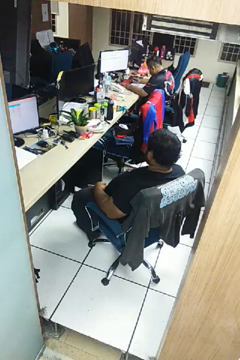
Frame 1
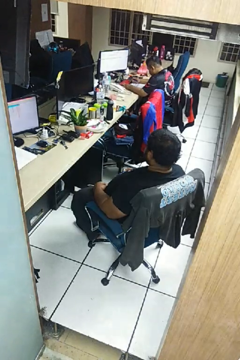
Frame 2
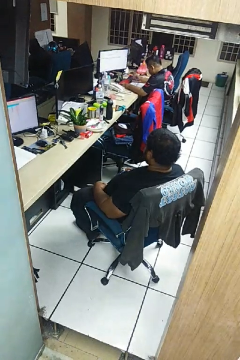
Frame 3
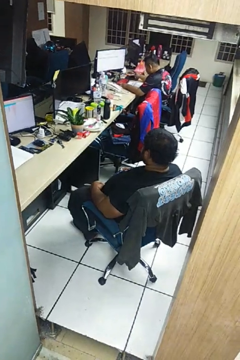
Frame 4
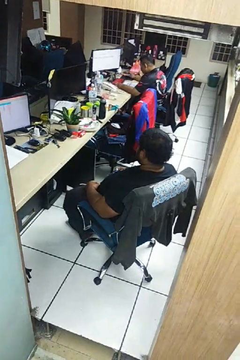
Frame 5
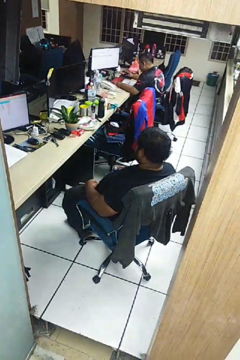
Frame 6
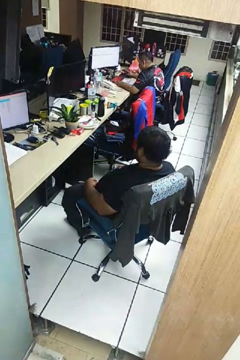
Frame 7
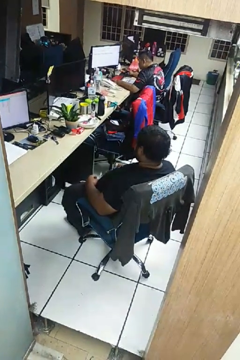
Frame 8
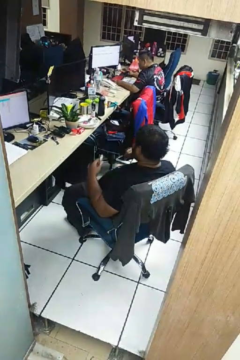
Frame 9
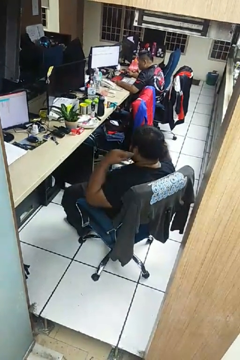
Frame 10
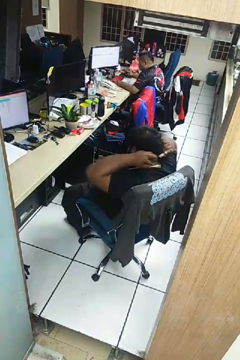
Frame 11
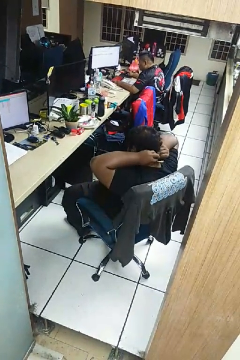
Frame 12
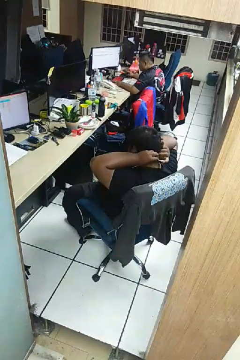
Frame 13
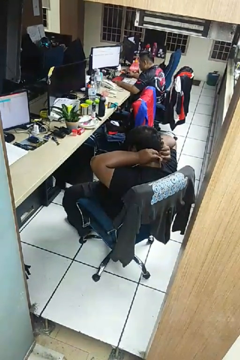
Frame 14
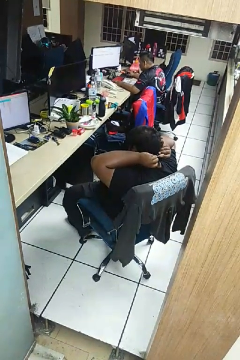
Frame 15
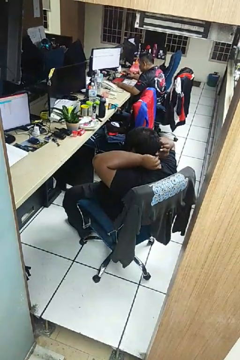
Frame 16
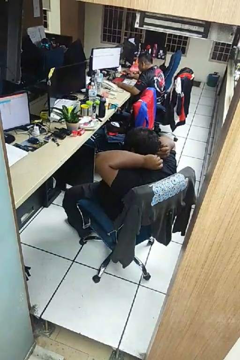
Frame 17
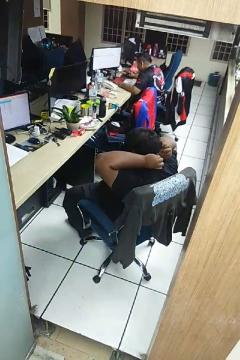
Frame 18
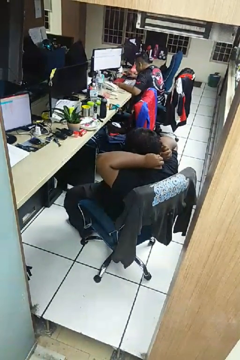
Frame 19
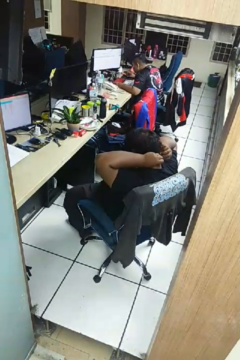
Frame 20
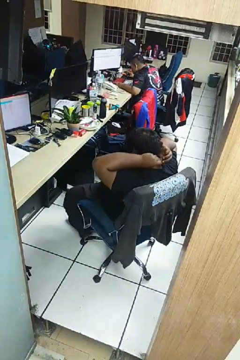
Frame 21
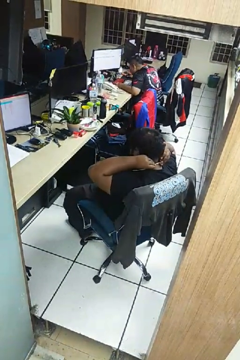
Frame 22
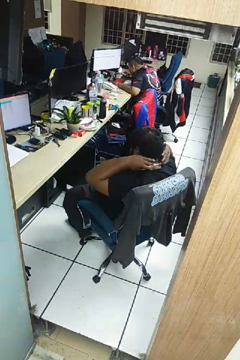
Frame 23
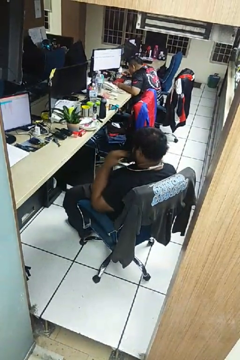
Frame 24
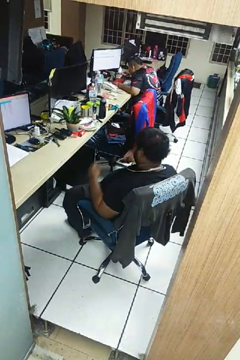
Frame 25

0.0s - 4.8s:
person puts on necklace

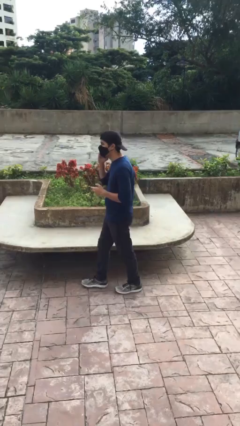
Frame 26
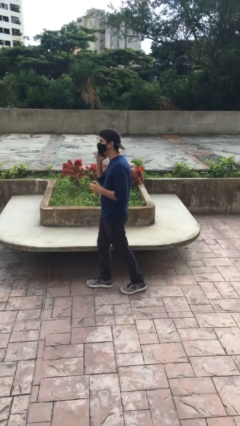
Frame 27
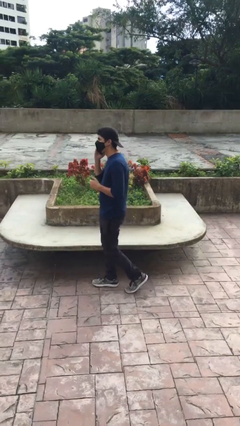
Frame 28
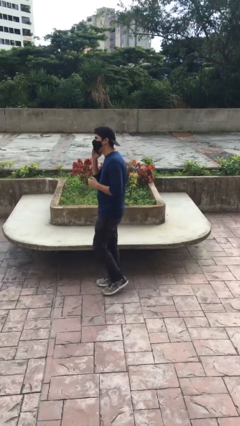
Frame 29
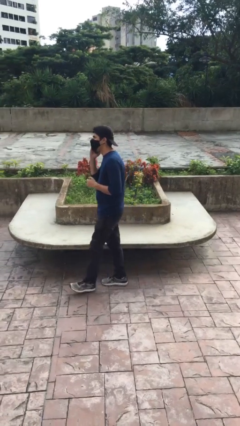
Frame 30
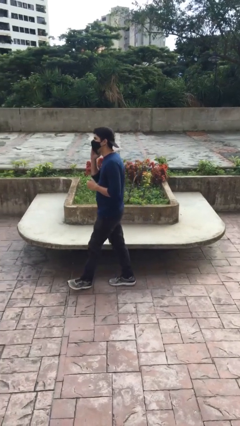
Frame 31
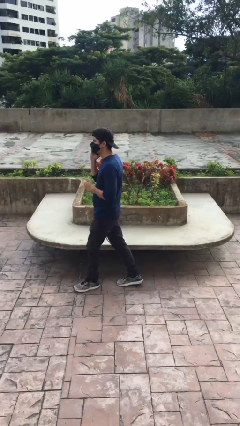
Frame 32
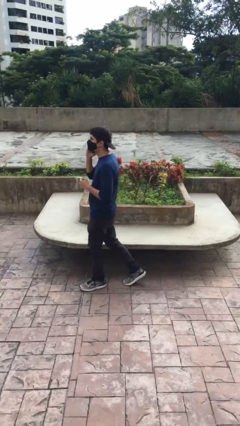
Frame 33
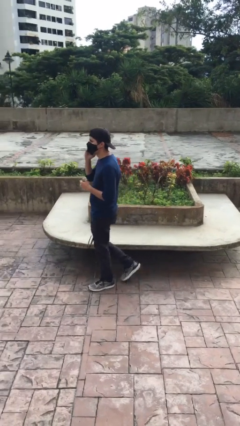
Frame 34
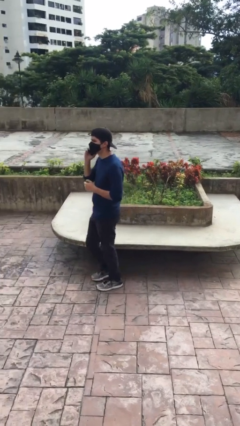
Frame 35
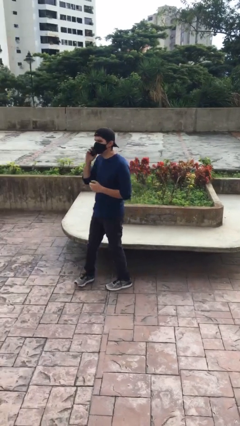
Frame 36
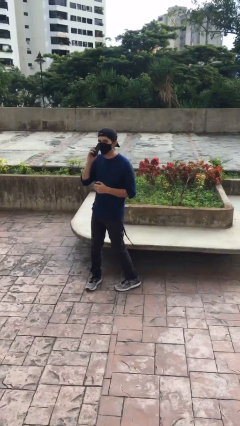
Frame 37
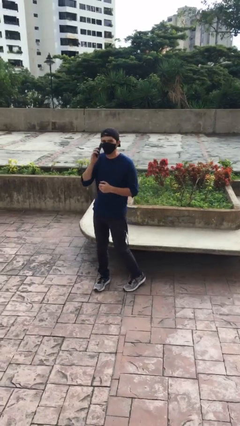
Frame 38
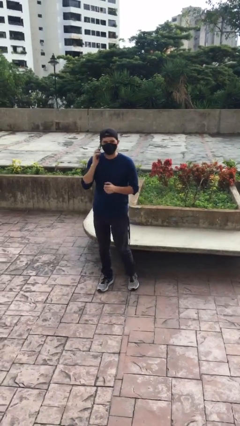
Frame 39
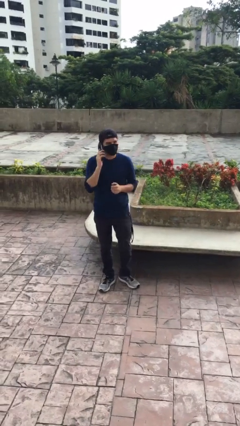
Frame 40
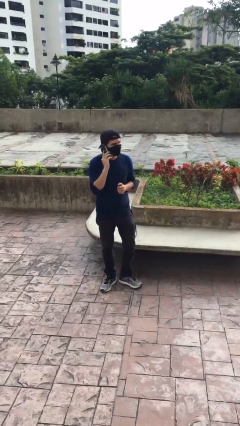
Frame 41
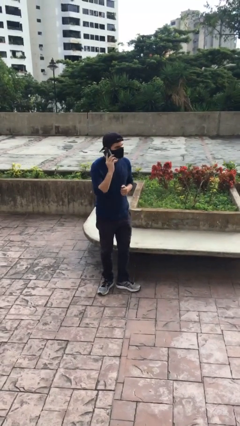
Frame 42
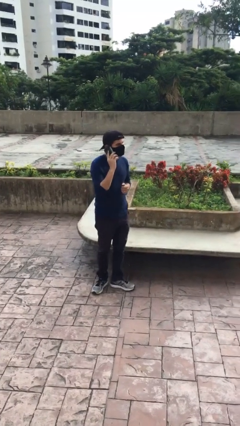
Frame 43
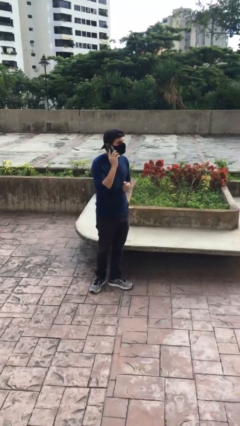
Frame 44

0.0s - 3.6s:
person talks on phone

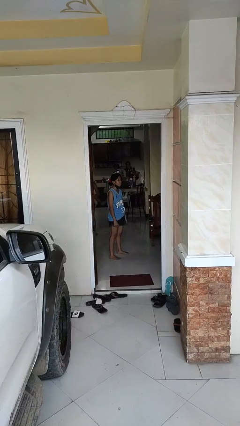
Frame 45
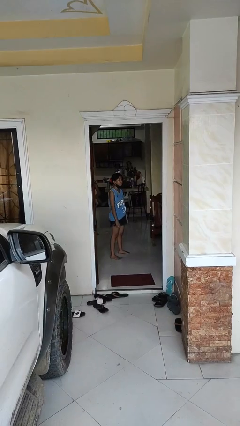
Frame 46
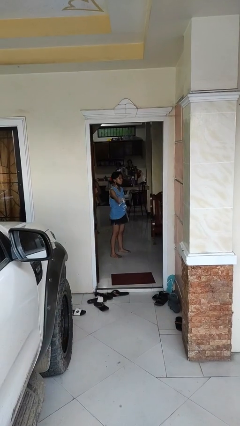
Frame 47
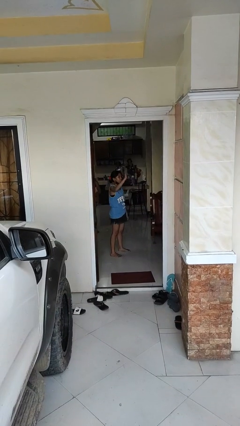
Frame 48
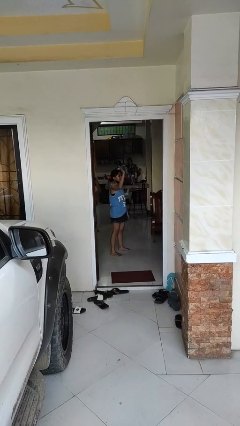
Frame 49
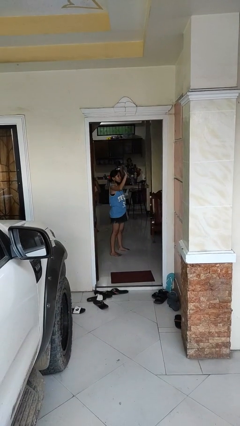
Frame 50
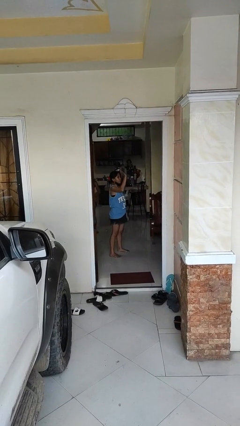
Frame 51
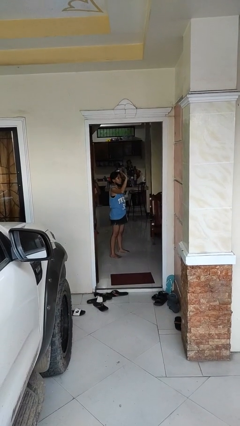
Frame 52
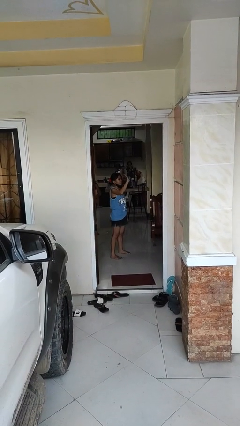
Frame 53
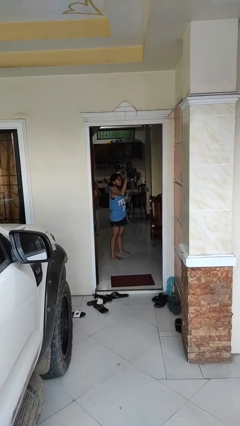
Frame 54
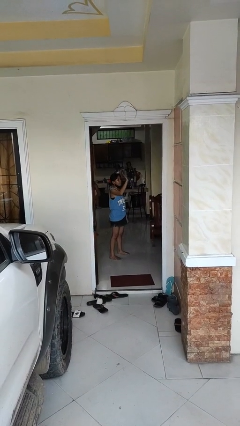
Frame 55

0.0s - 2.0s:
person waves at person

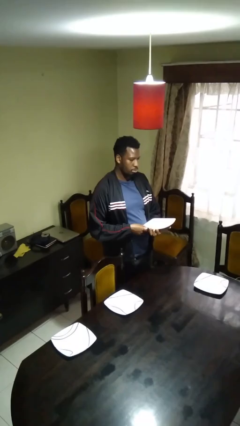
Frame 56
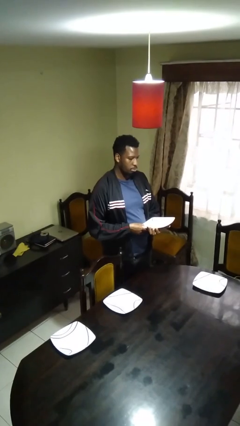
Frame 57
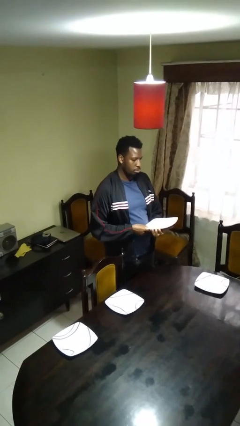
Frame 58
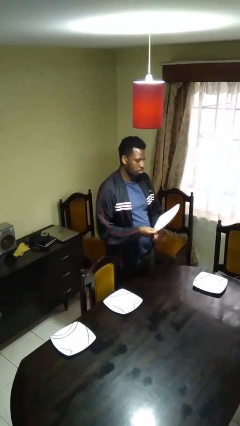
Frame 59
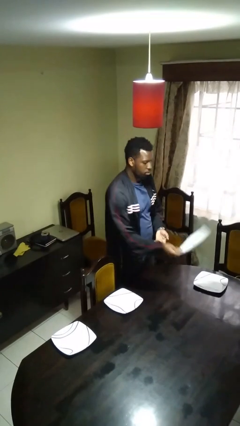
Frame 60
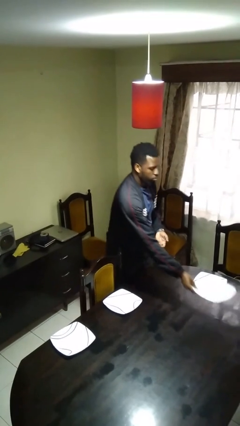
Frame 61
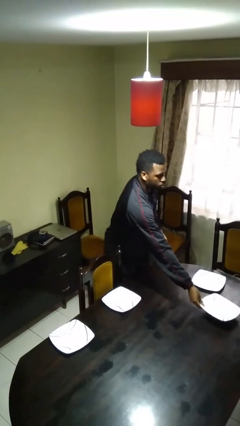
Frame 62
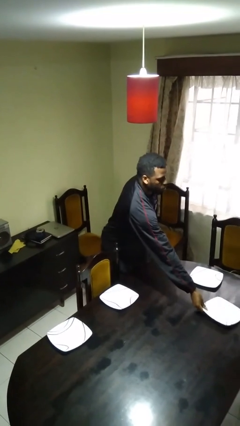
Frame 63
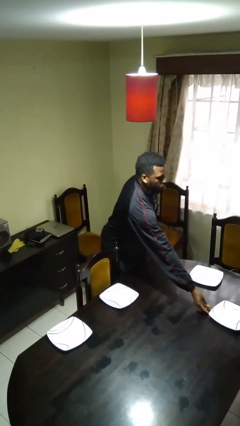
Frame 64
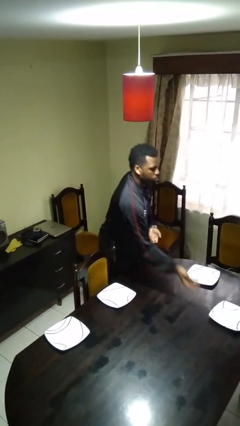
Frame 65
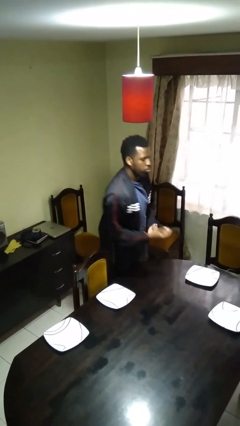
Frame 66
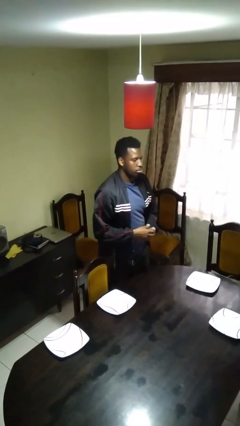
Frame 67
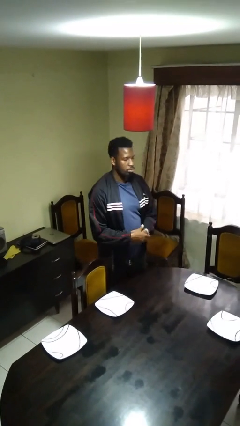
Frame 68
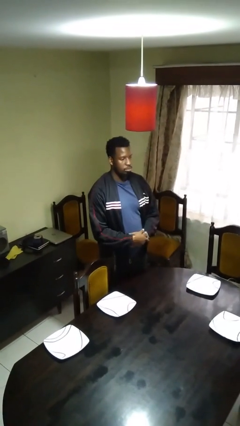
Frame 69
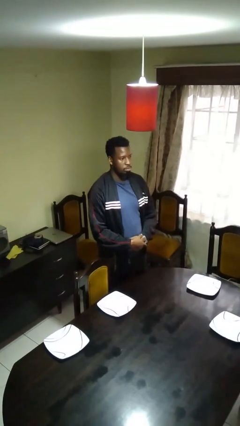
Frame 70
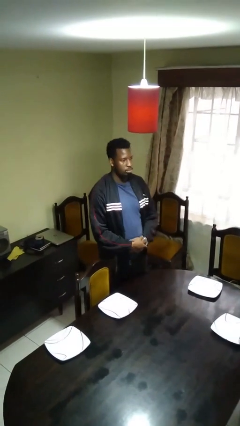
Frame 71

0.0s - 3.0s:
person sets table

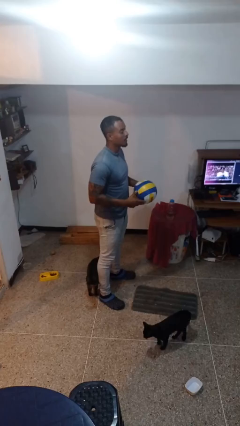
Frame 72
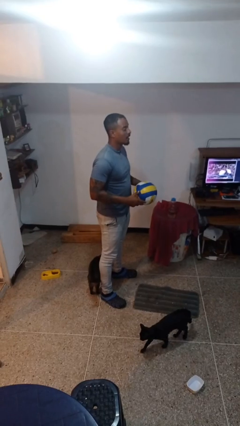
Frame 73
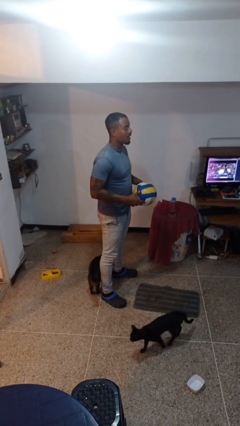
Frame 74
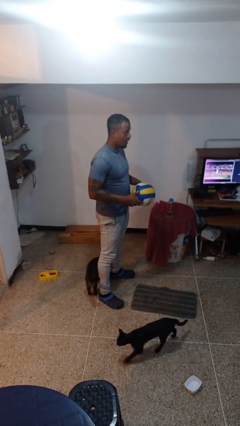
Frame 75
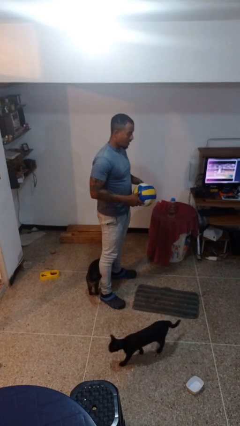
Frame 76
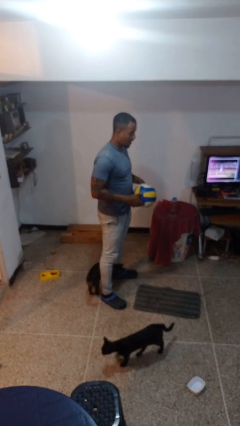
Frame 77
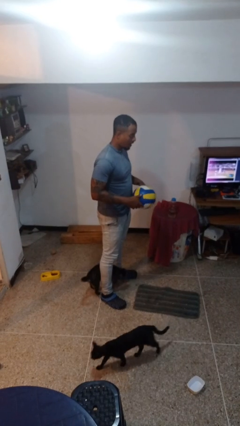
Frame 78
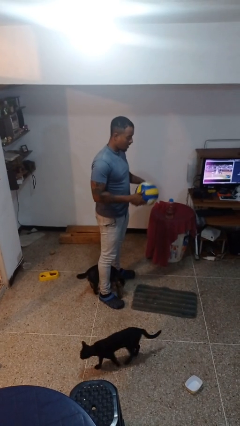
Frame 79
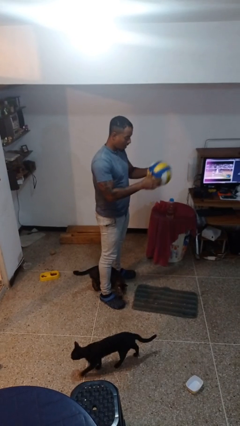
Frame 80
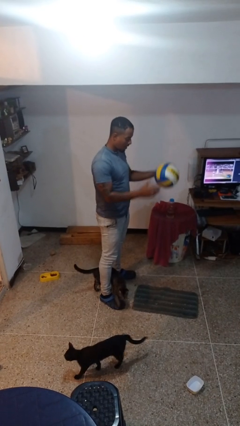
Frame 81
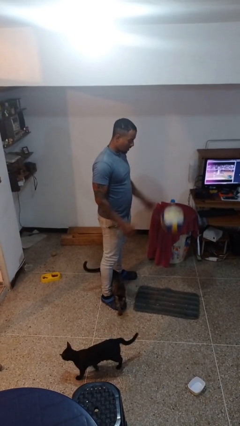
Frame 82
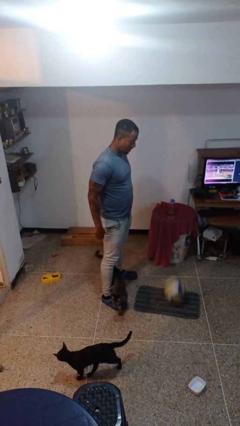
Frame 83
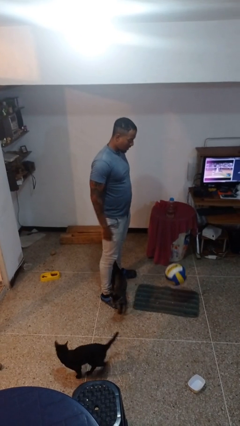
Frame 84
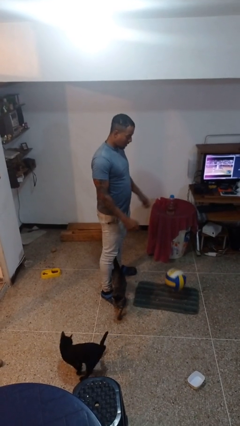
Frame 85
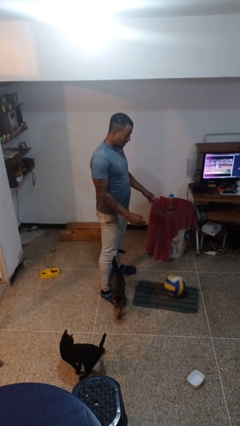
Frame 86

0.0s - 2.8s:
person throws object into air

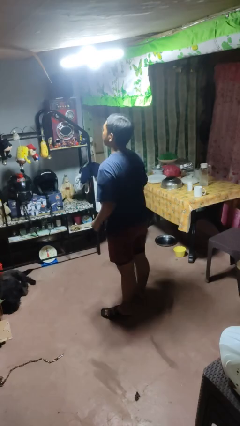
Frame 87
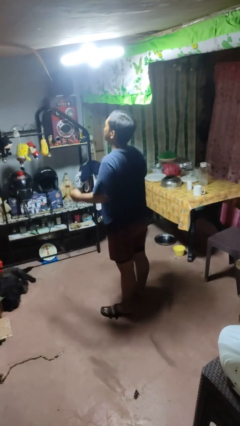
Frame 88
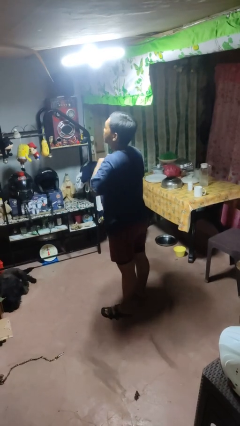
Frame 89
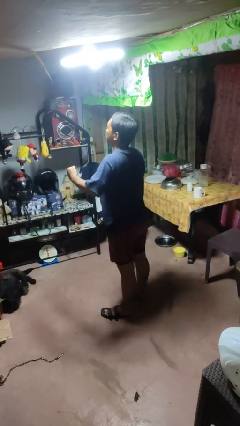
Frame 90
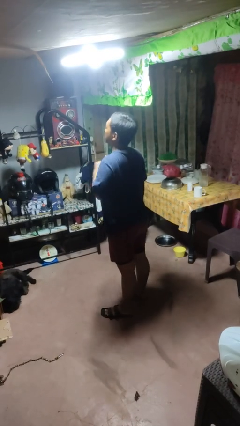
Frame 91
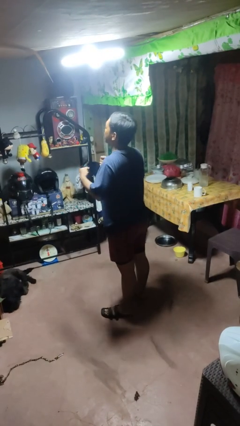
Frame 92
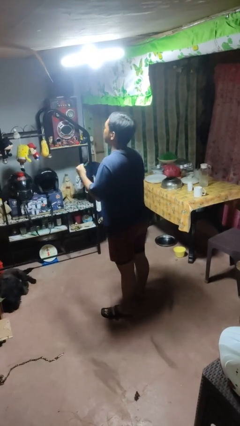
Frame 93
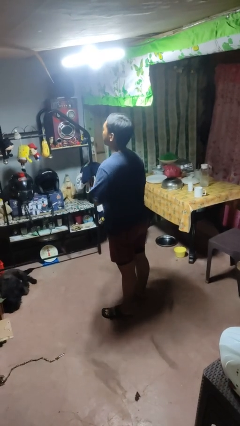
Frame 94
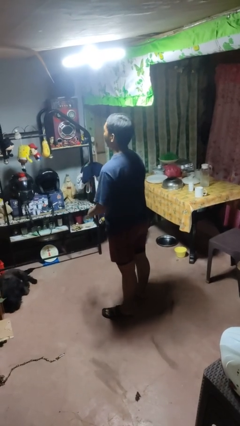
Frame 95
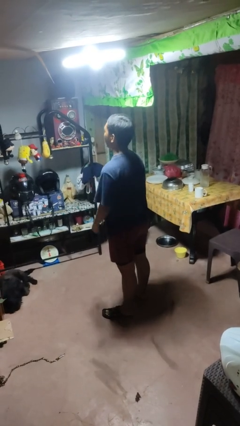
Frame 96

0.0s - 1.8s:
person drums on chest
